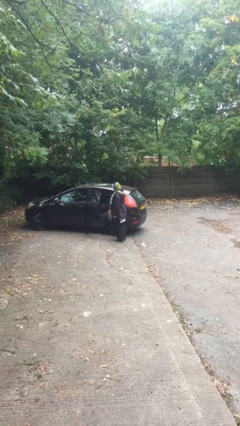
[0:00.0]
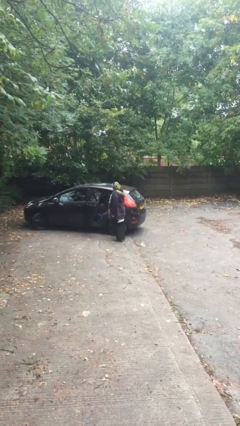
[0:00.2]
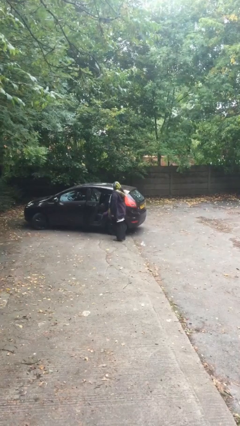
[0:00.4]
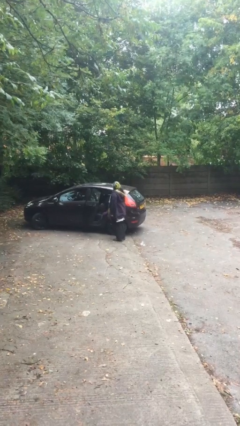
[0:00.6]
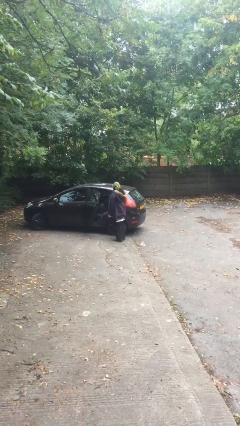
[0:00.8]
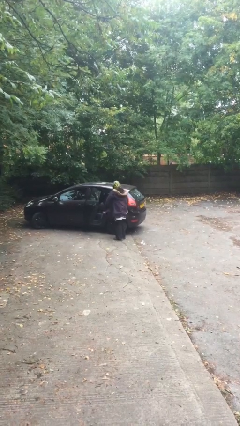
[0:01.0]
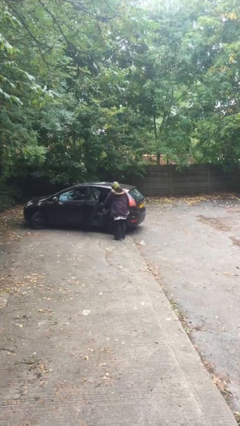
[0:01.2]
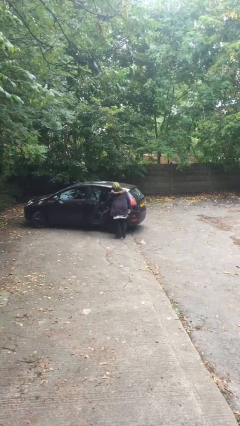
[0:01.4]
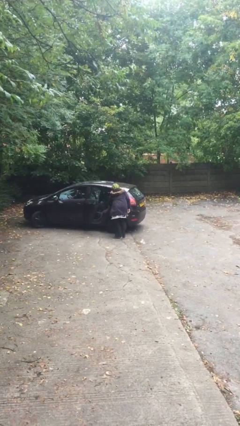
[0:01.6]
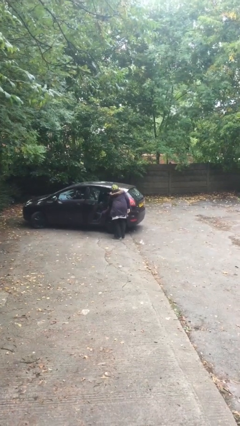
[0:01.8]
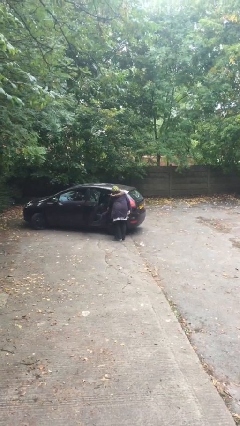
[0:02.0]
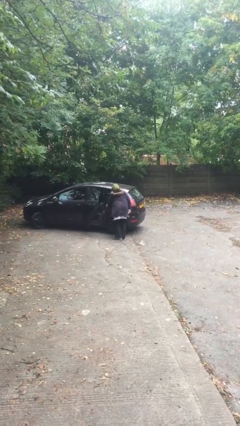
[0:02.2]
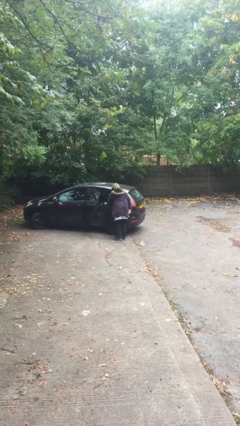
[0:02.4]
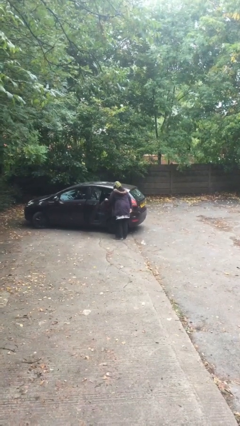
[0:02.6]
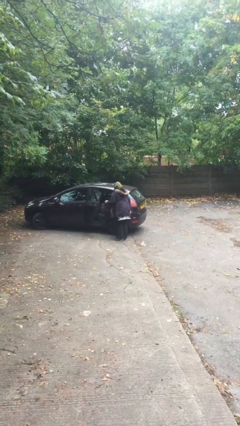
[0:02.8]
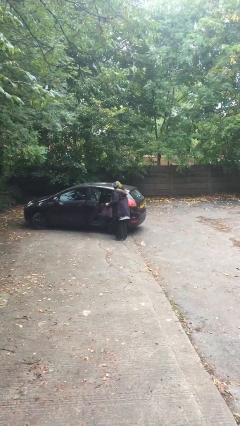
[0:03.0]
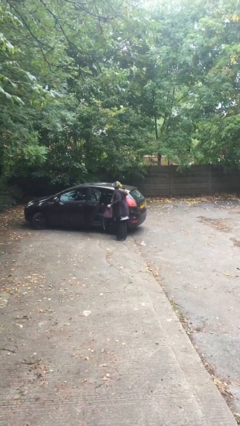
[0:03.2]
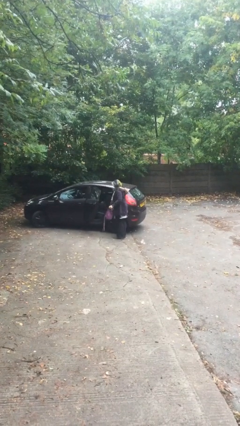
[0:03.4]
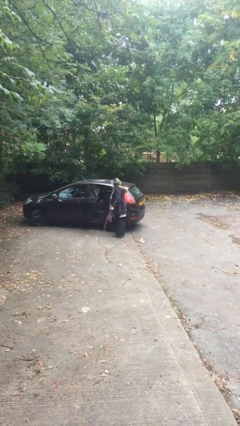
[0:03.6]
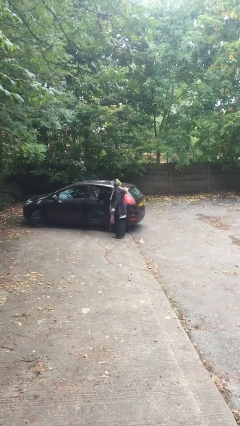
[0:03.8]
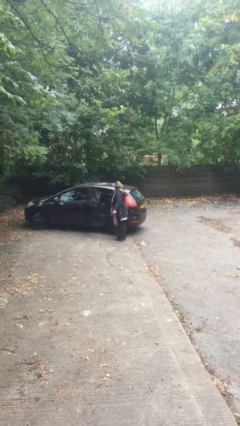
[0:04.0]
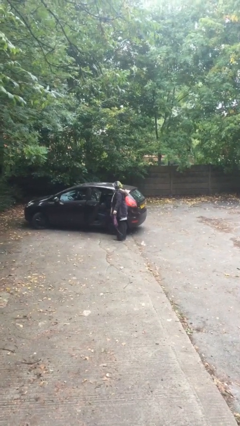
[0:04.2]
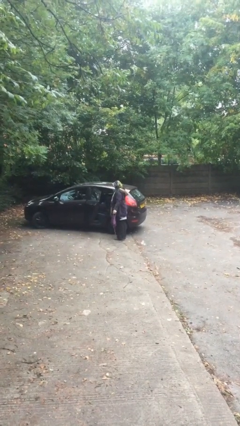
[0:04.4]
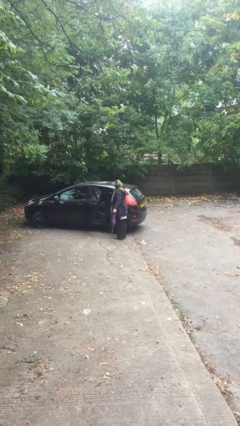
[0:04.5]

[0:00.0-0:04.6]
person unloads car

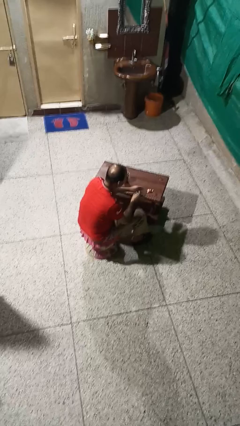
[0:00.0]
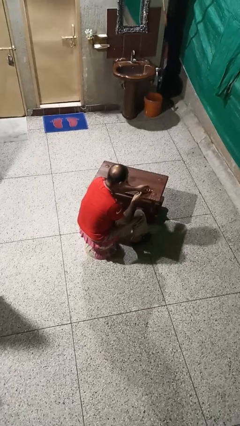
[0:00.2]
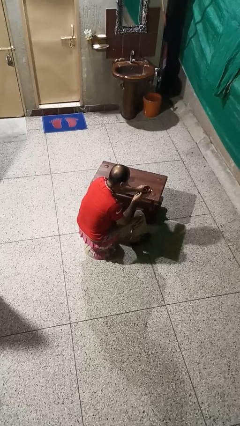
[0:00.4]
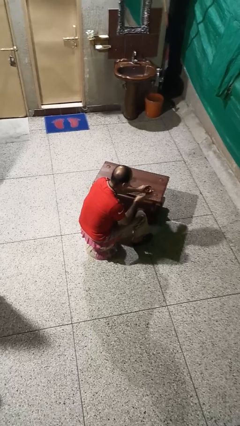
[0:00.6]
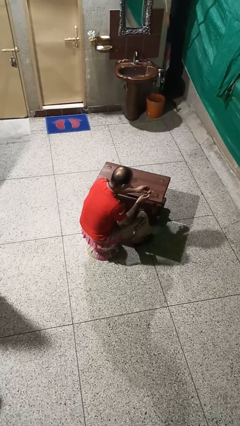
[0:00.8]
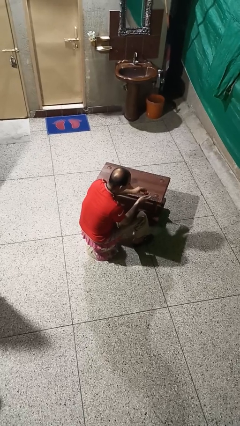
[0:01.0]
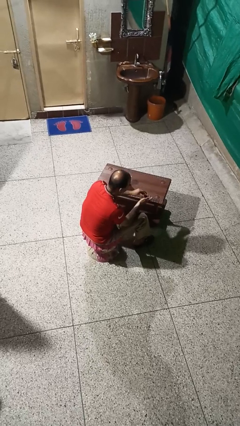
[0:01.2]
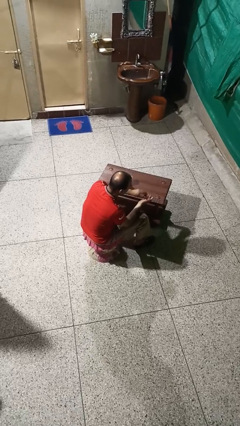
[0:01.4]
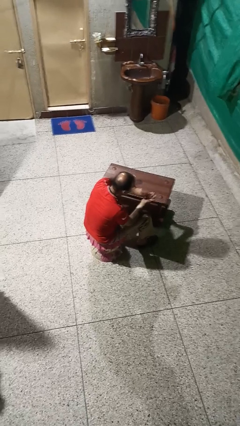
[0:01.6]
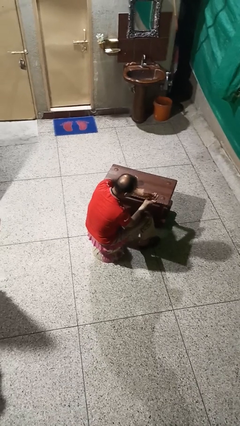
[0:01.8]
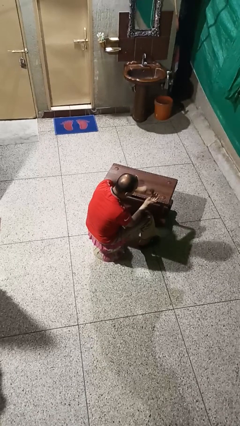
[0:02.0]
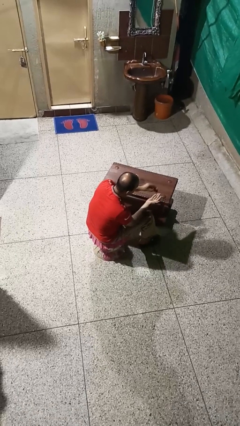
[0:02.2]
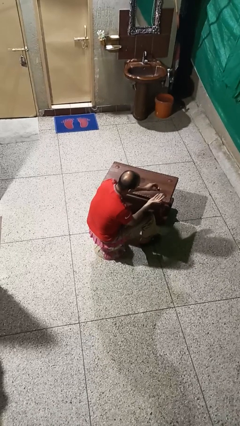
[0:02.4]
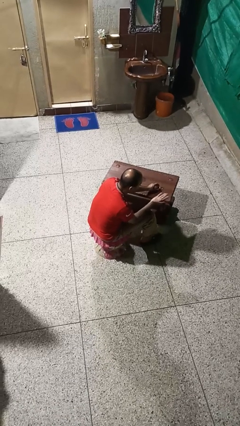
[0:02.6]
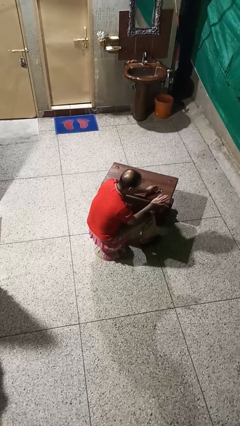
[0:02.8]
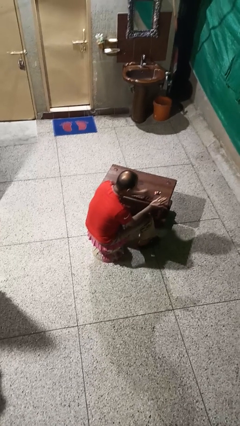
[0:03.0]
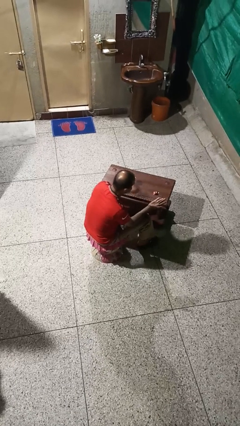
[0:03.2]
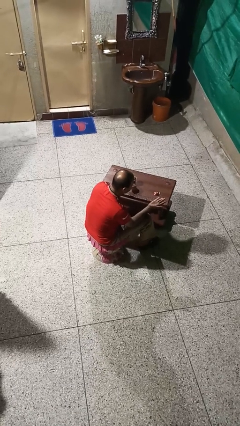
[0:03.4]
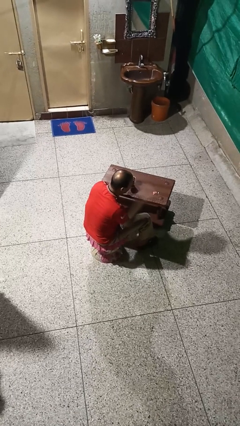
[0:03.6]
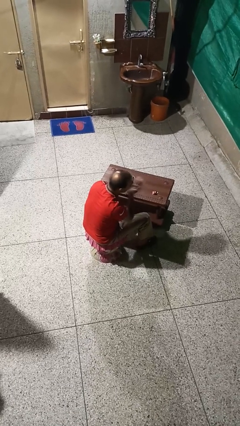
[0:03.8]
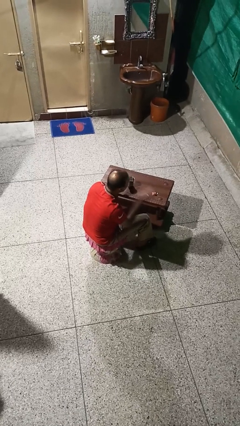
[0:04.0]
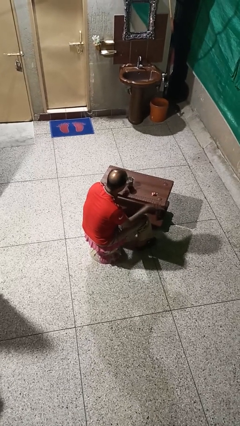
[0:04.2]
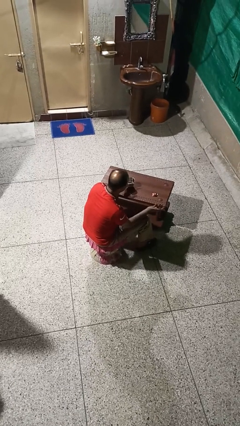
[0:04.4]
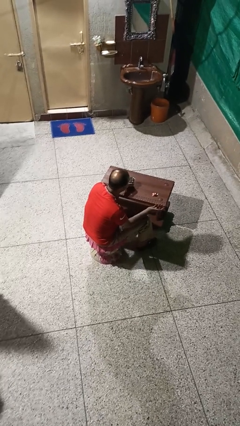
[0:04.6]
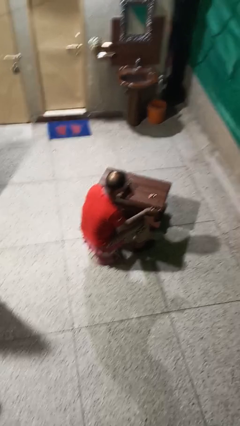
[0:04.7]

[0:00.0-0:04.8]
person takes medicine pills

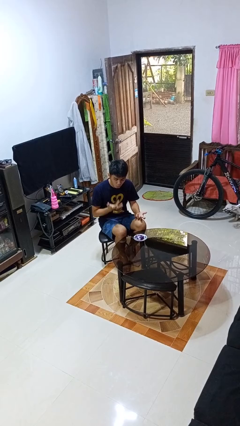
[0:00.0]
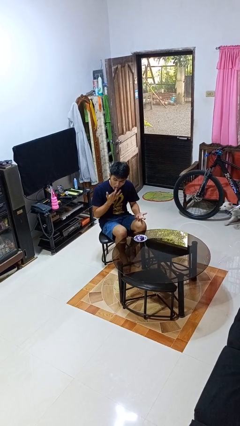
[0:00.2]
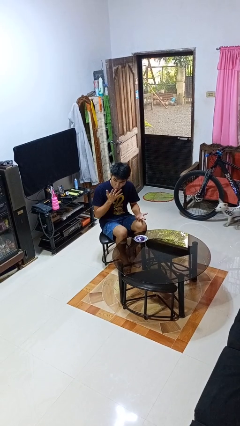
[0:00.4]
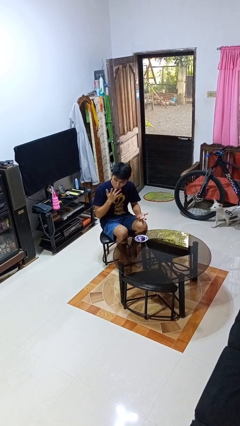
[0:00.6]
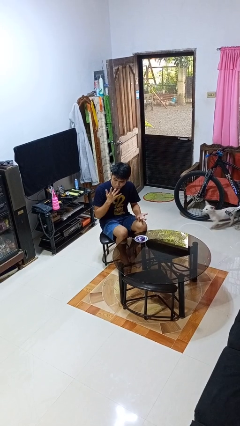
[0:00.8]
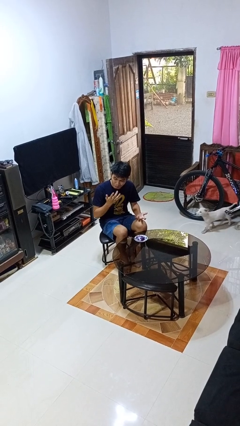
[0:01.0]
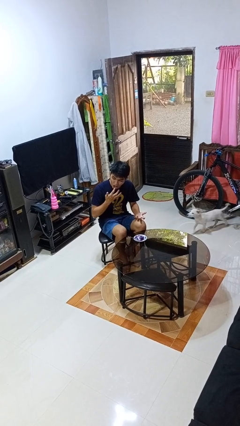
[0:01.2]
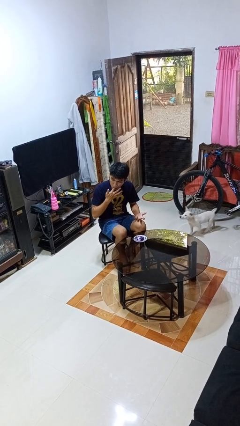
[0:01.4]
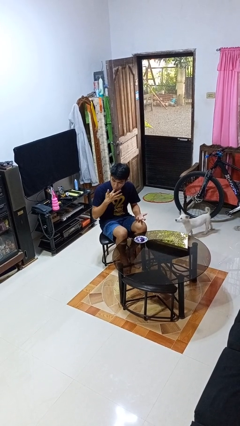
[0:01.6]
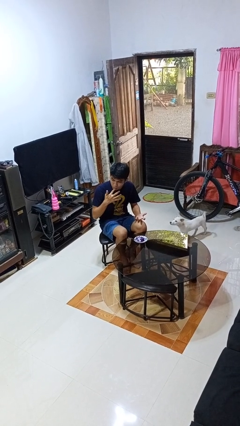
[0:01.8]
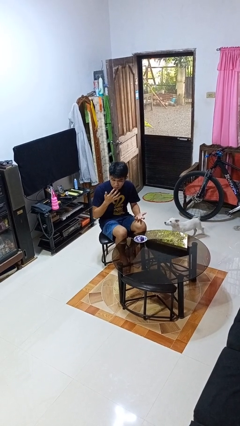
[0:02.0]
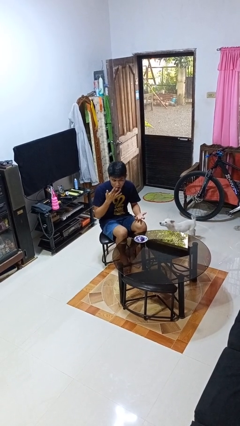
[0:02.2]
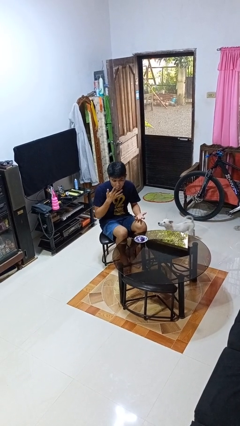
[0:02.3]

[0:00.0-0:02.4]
person licks fingers

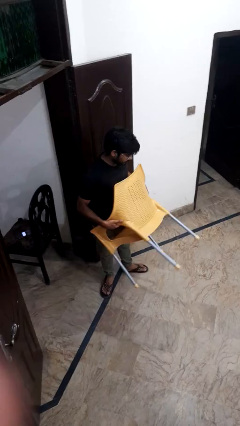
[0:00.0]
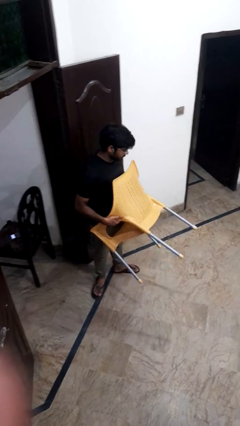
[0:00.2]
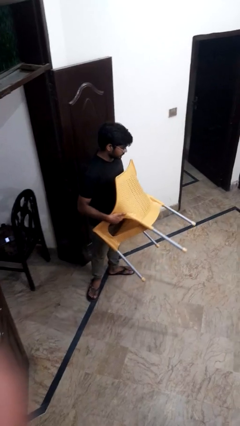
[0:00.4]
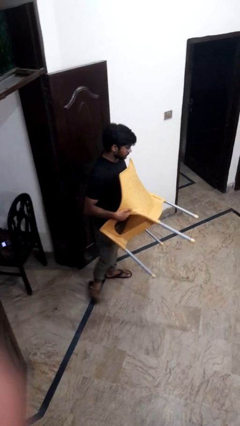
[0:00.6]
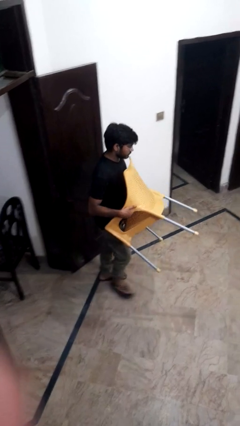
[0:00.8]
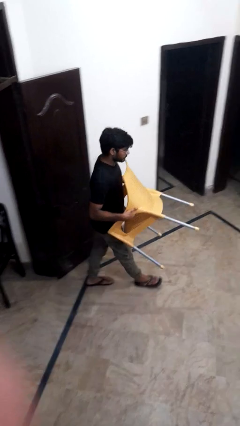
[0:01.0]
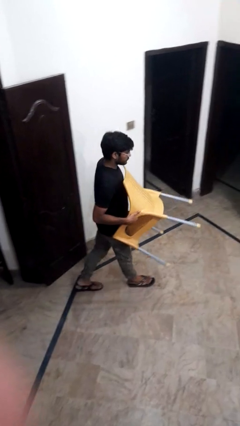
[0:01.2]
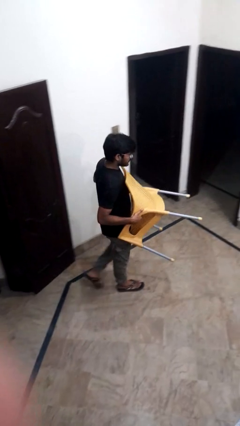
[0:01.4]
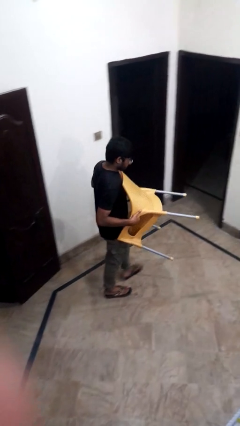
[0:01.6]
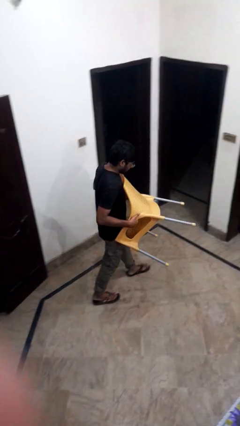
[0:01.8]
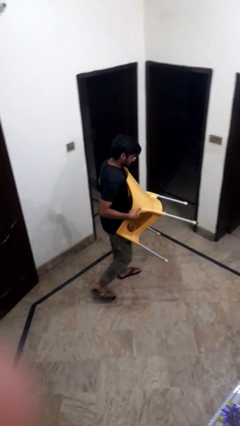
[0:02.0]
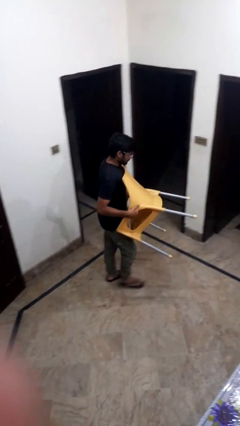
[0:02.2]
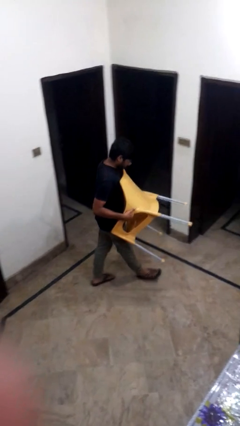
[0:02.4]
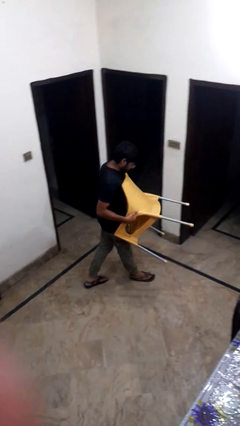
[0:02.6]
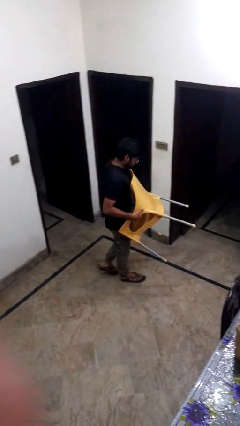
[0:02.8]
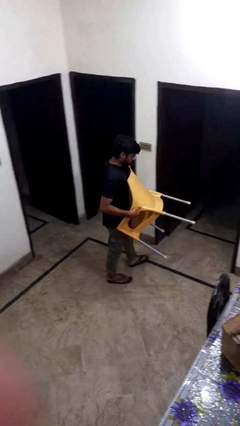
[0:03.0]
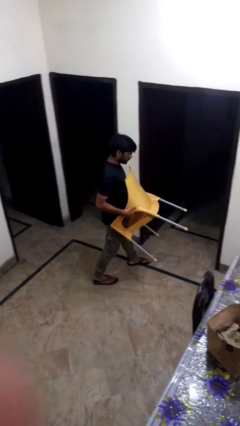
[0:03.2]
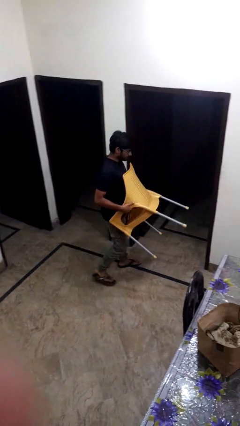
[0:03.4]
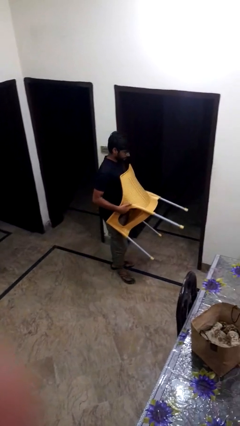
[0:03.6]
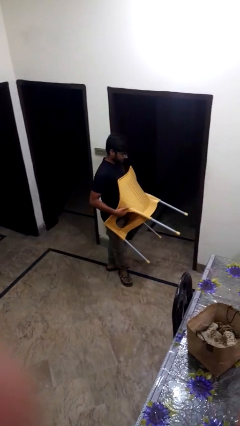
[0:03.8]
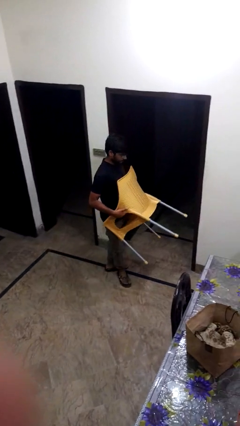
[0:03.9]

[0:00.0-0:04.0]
person carries furniture

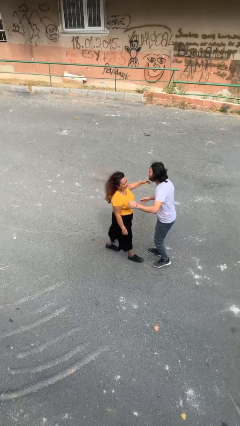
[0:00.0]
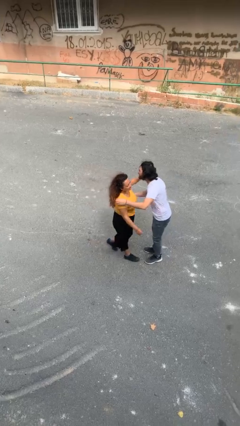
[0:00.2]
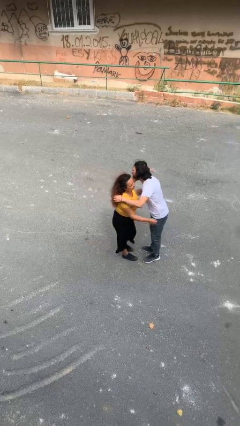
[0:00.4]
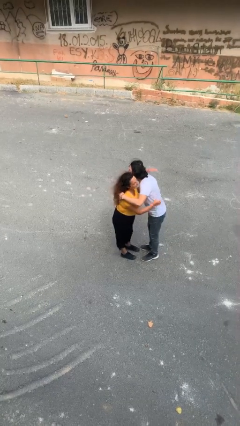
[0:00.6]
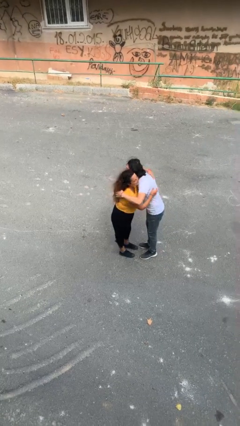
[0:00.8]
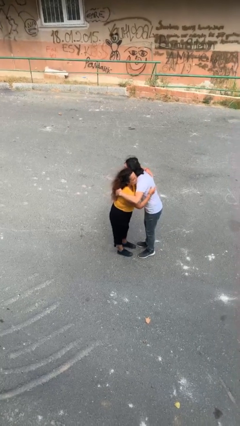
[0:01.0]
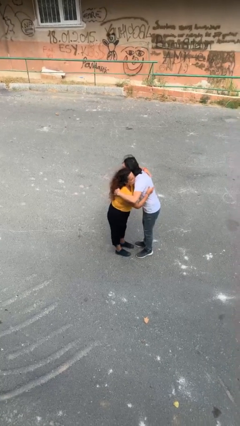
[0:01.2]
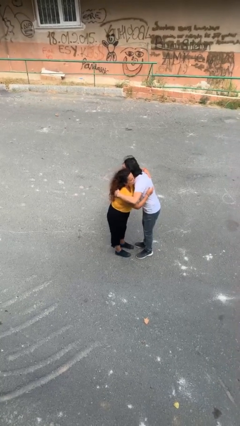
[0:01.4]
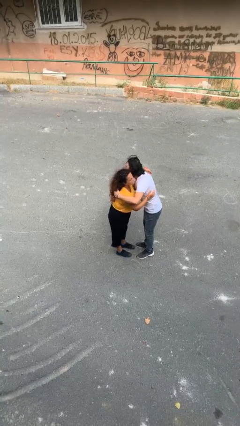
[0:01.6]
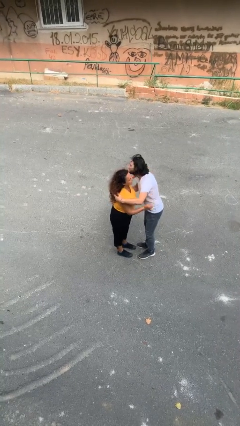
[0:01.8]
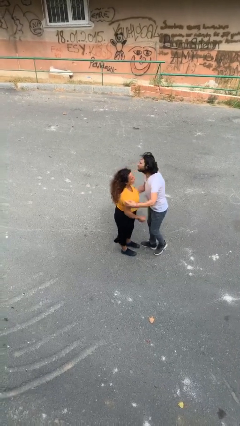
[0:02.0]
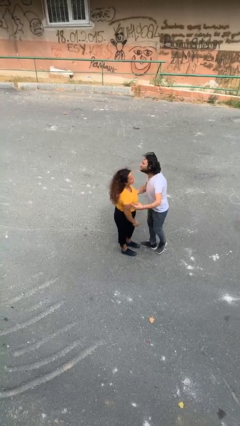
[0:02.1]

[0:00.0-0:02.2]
person embraces person
